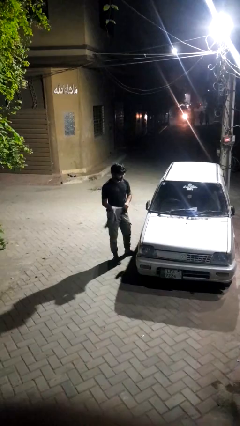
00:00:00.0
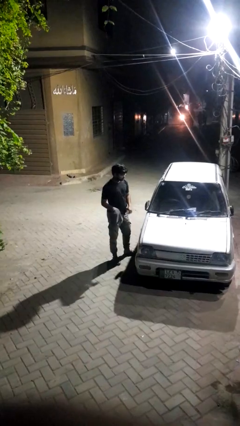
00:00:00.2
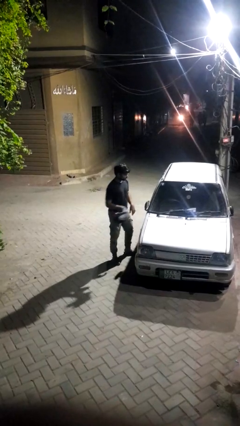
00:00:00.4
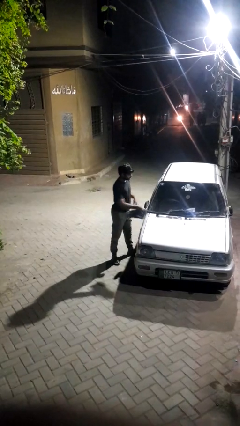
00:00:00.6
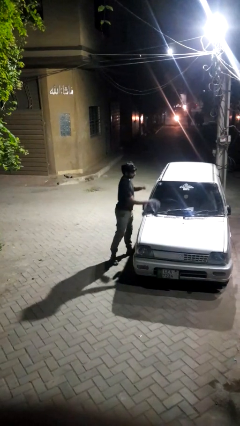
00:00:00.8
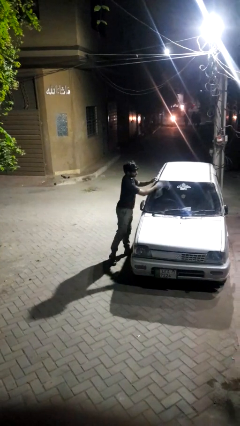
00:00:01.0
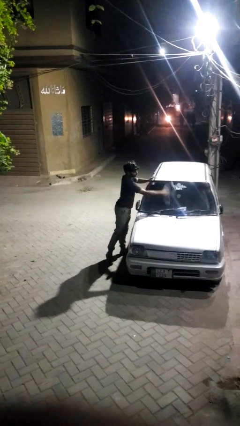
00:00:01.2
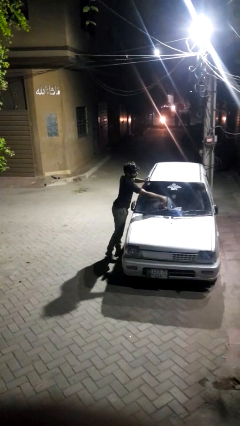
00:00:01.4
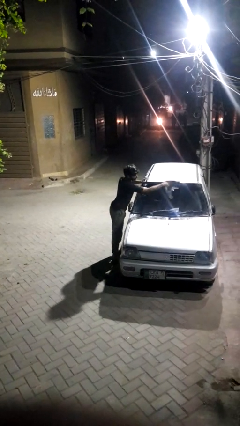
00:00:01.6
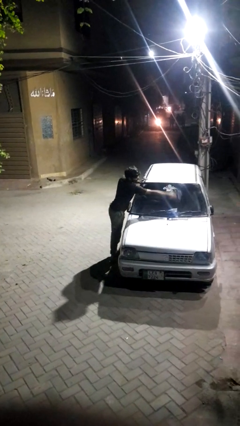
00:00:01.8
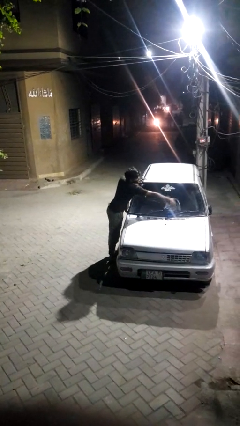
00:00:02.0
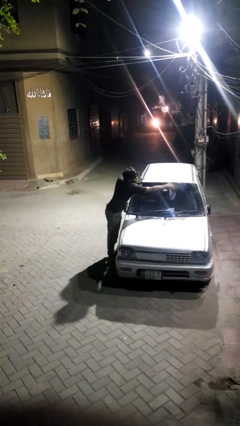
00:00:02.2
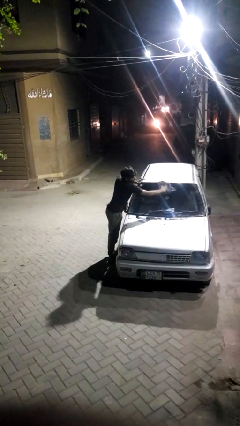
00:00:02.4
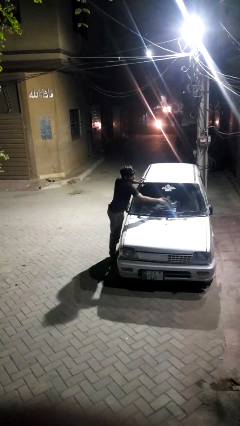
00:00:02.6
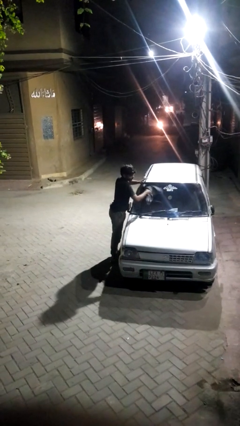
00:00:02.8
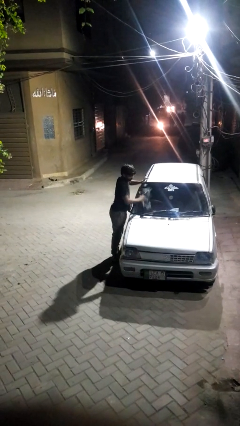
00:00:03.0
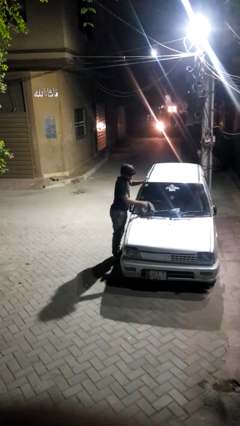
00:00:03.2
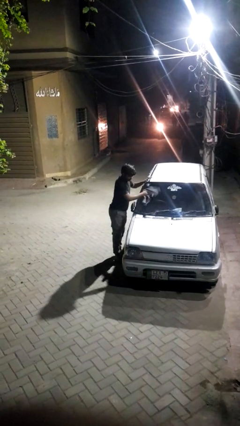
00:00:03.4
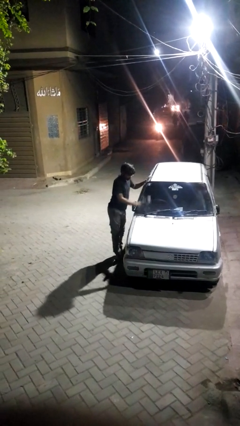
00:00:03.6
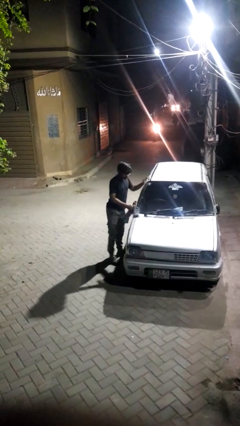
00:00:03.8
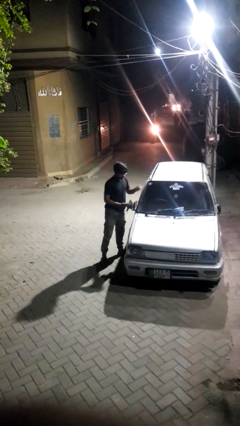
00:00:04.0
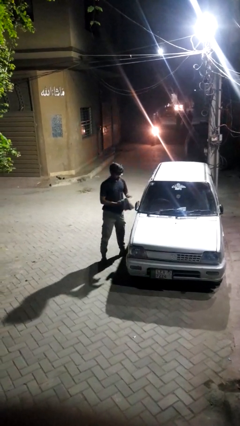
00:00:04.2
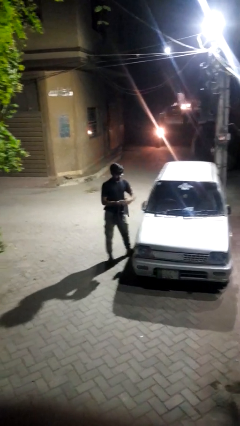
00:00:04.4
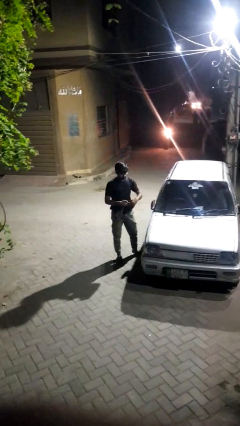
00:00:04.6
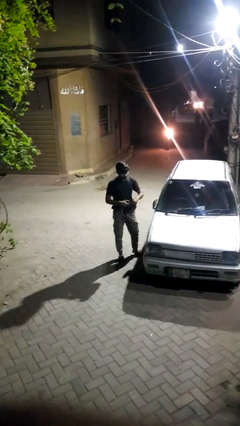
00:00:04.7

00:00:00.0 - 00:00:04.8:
person polishes car with rag

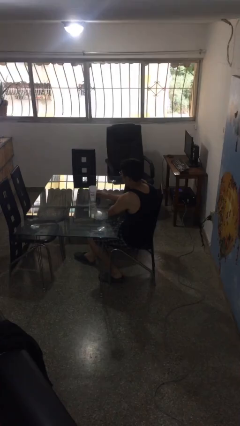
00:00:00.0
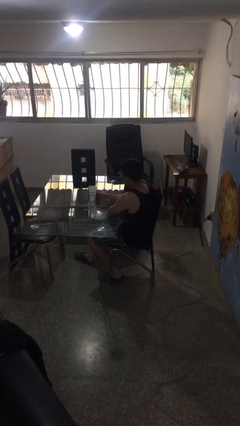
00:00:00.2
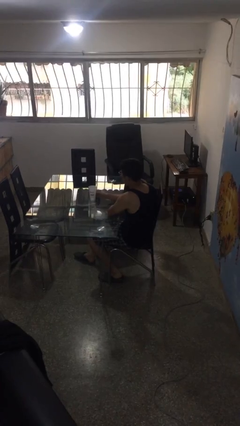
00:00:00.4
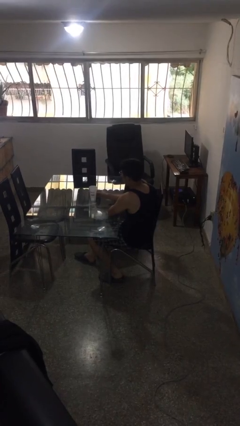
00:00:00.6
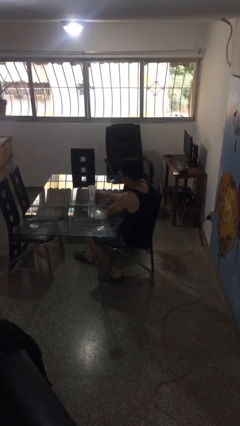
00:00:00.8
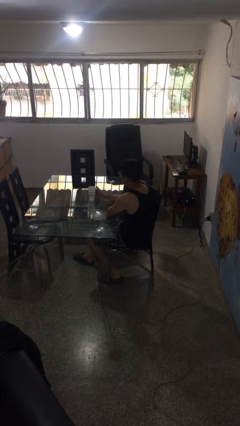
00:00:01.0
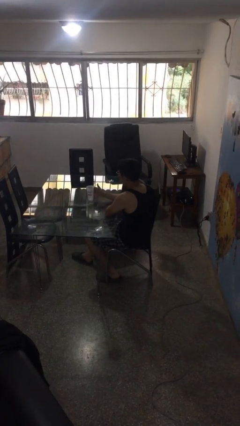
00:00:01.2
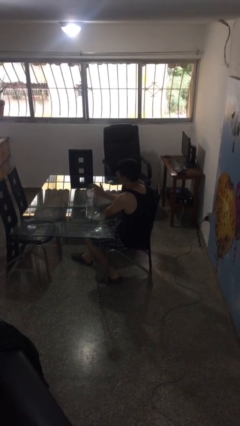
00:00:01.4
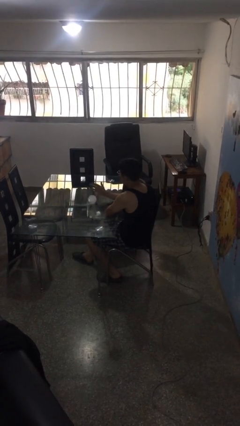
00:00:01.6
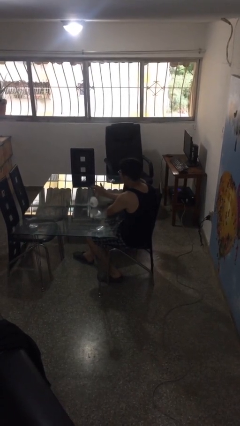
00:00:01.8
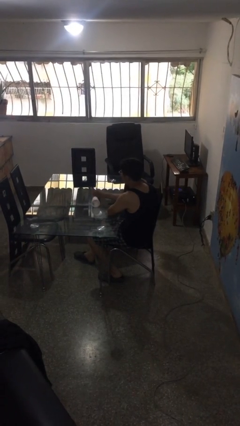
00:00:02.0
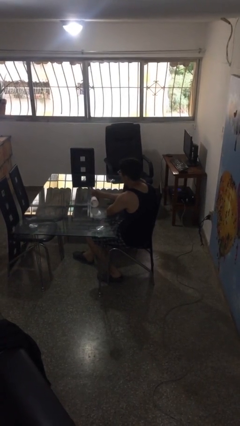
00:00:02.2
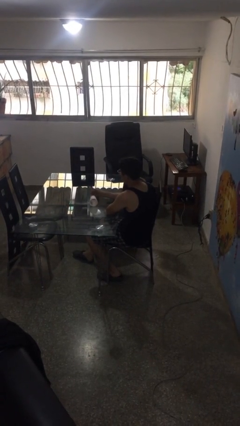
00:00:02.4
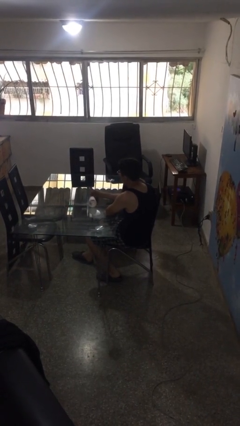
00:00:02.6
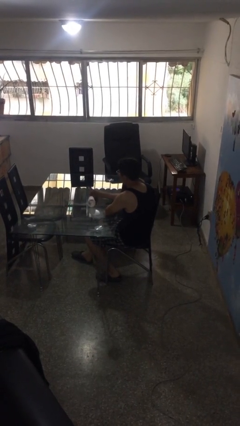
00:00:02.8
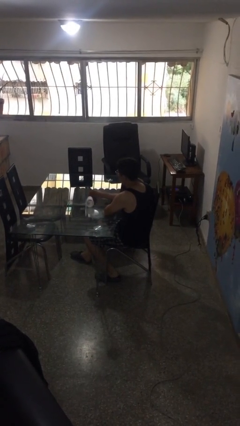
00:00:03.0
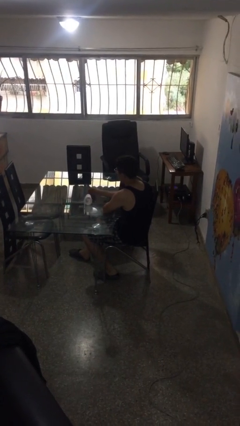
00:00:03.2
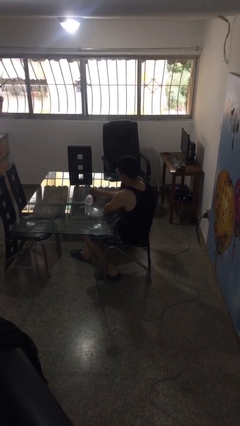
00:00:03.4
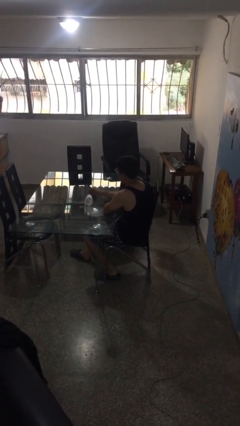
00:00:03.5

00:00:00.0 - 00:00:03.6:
person knocks over glass

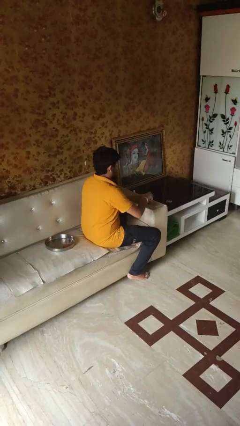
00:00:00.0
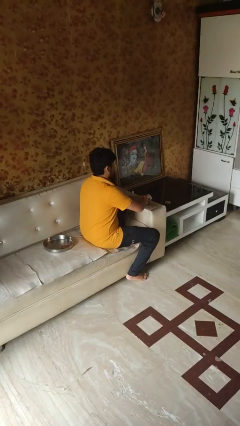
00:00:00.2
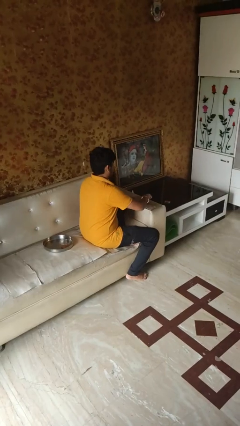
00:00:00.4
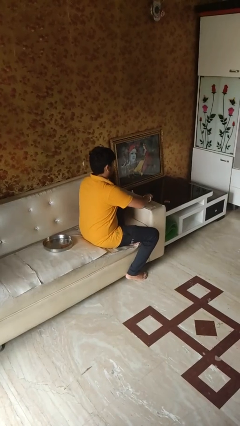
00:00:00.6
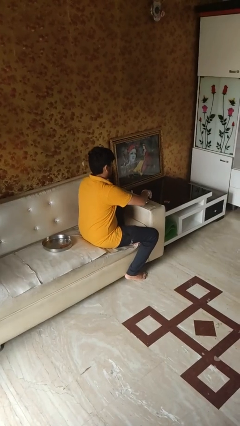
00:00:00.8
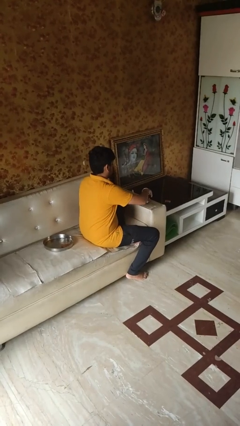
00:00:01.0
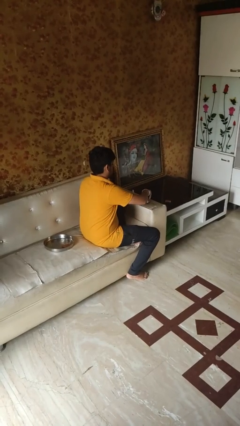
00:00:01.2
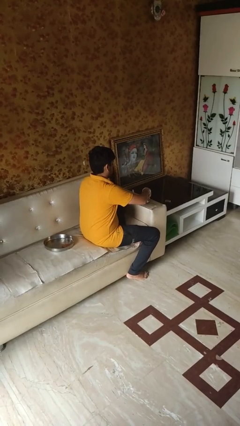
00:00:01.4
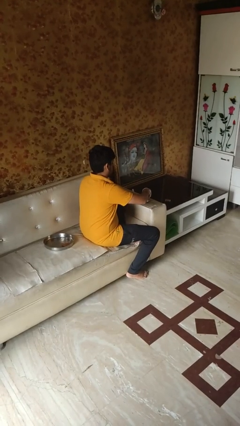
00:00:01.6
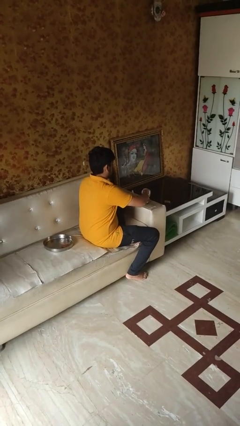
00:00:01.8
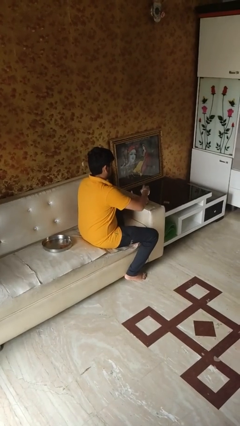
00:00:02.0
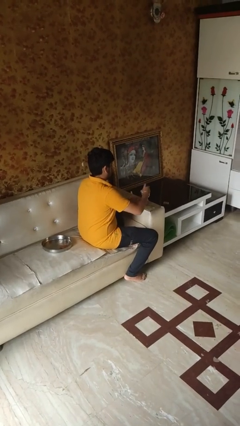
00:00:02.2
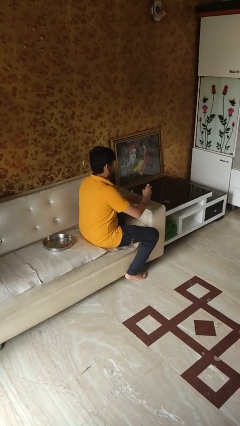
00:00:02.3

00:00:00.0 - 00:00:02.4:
person opens jar

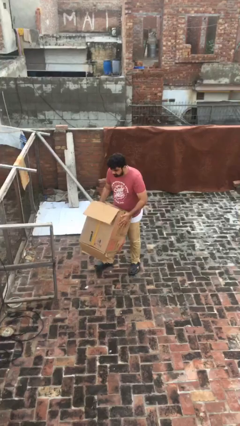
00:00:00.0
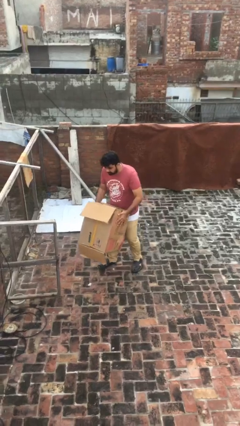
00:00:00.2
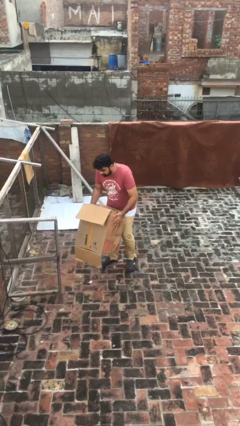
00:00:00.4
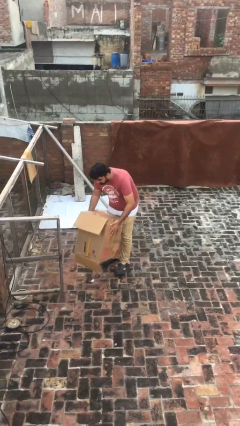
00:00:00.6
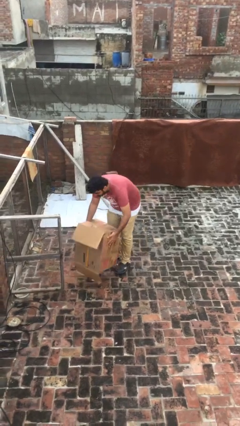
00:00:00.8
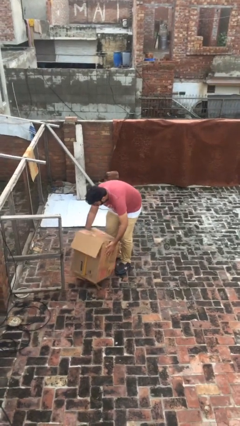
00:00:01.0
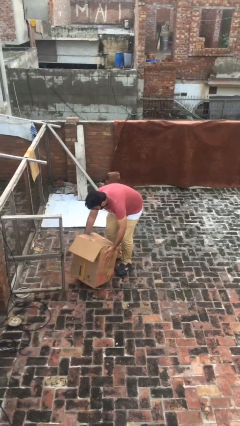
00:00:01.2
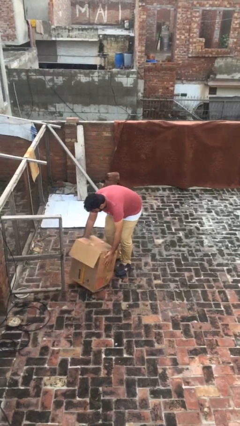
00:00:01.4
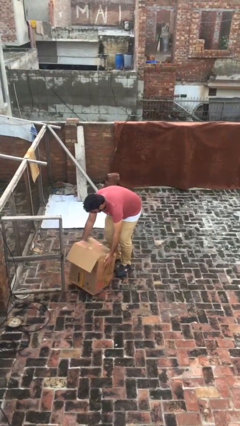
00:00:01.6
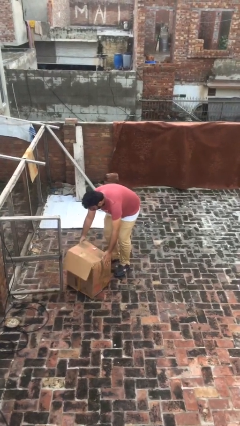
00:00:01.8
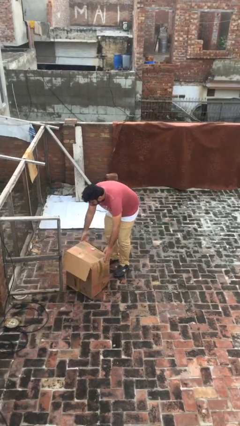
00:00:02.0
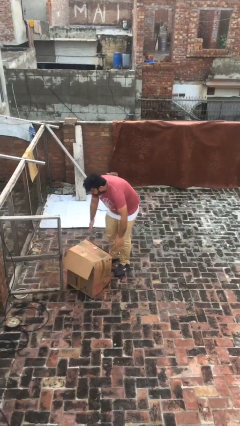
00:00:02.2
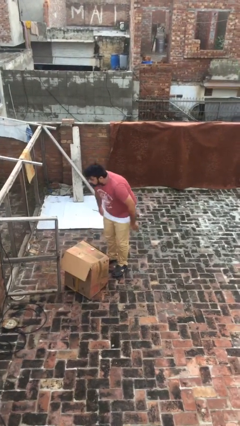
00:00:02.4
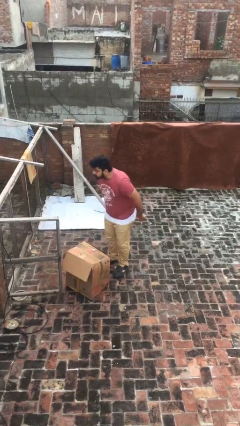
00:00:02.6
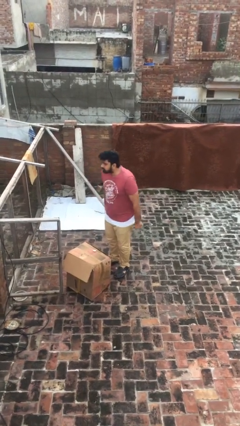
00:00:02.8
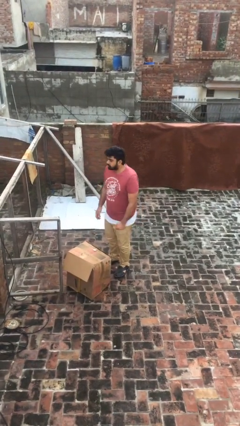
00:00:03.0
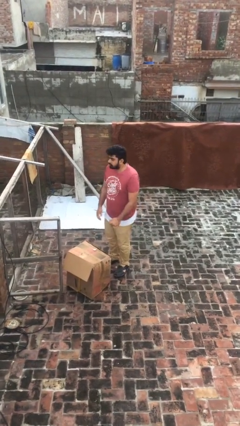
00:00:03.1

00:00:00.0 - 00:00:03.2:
person puts down object on floor

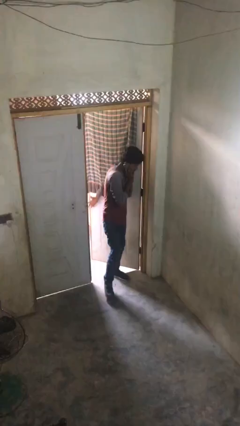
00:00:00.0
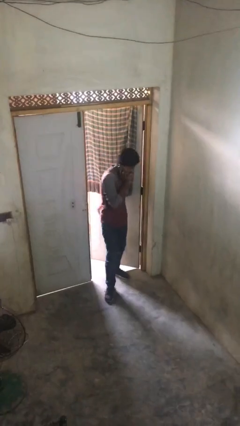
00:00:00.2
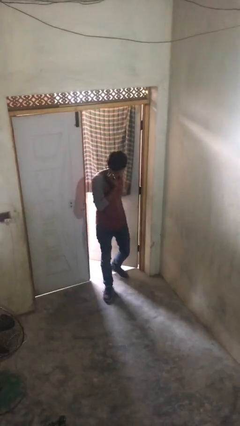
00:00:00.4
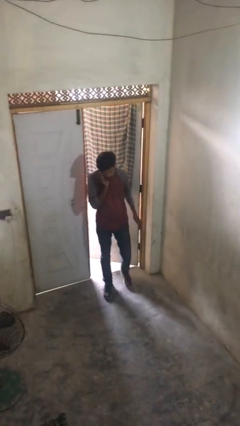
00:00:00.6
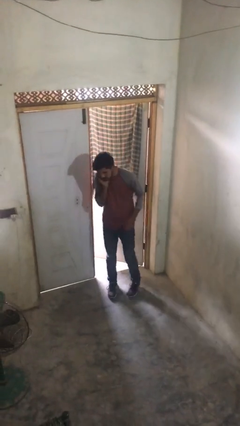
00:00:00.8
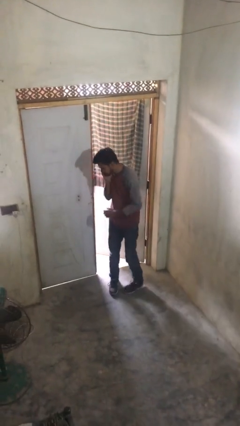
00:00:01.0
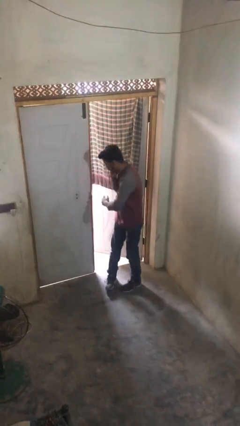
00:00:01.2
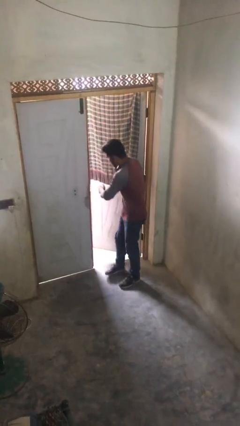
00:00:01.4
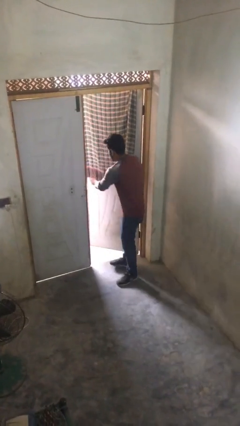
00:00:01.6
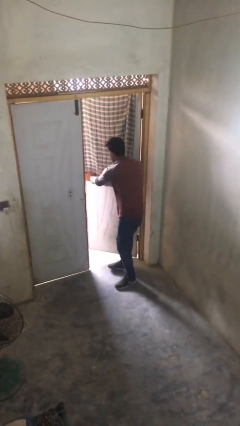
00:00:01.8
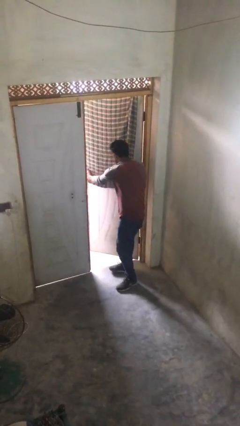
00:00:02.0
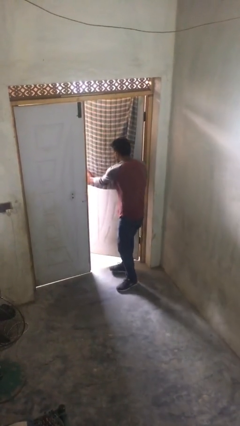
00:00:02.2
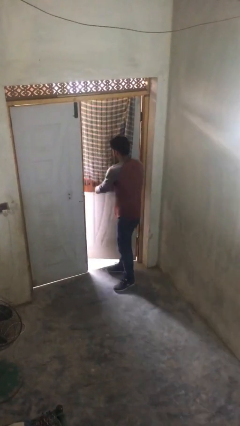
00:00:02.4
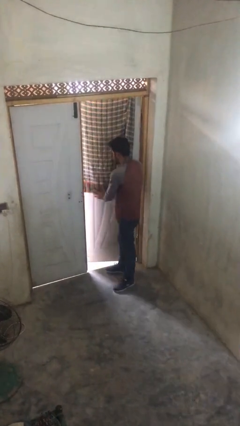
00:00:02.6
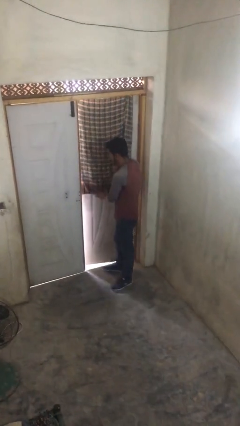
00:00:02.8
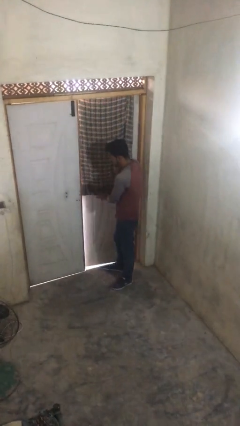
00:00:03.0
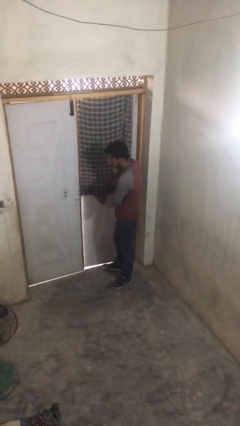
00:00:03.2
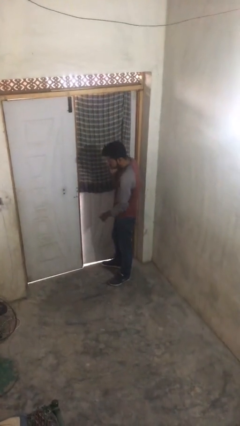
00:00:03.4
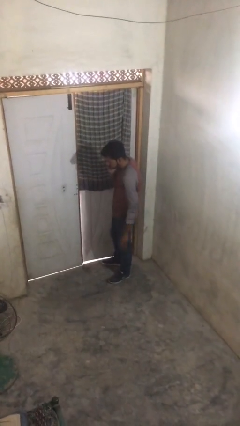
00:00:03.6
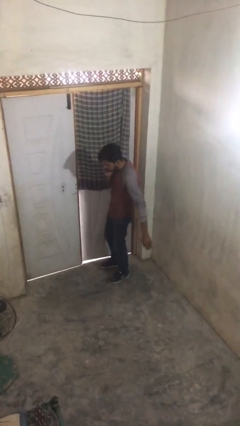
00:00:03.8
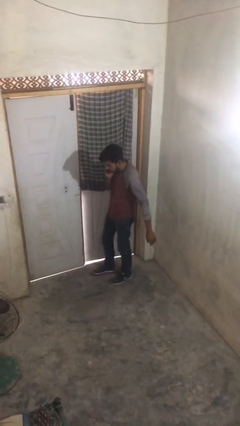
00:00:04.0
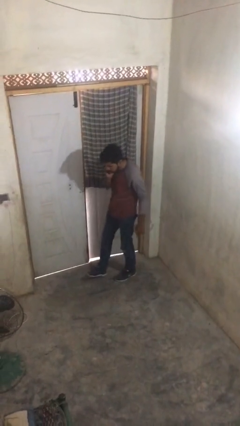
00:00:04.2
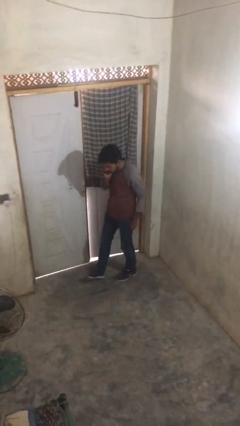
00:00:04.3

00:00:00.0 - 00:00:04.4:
person closes facility door
